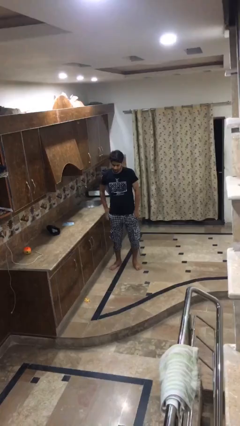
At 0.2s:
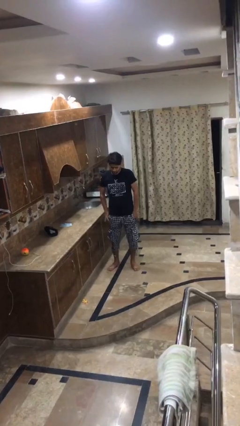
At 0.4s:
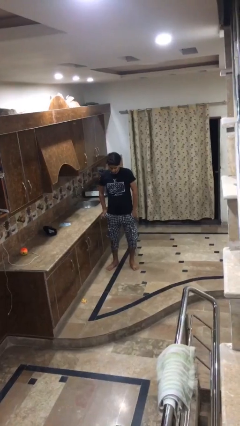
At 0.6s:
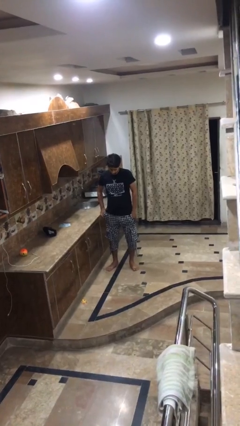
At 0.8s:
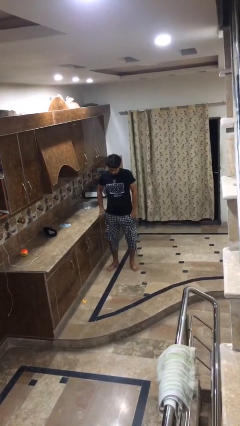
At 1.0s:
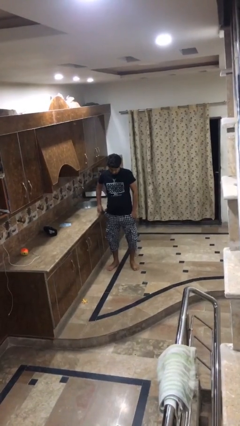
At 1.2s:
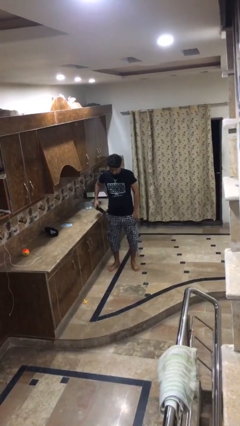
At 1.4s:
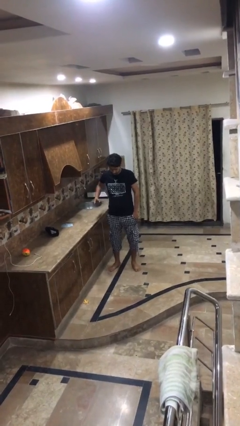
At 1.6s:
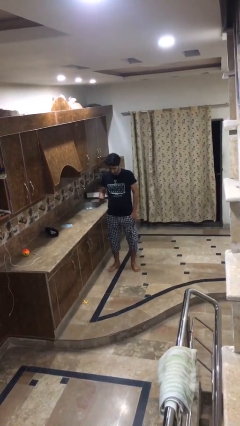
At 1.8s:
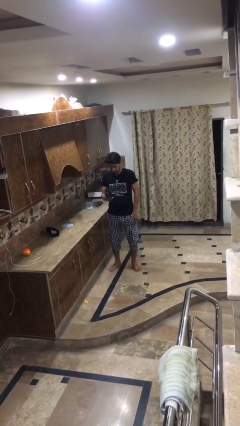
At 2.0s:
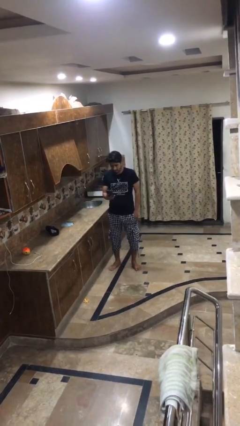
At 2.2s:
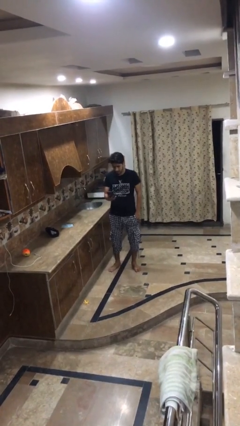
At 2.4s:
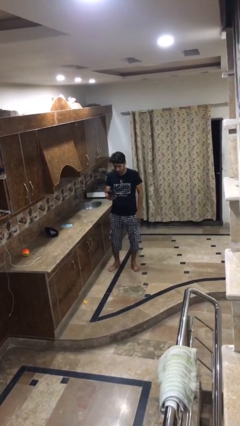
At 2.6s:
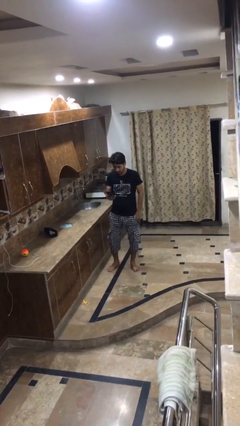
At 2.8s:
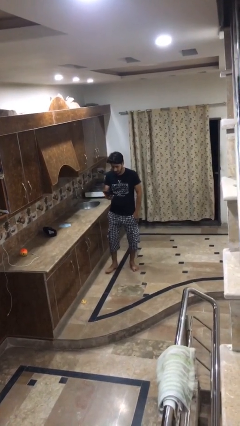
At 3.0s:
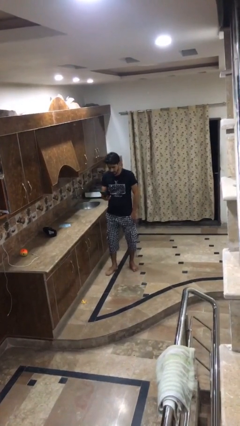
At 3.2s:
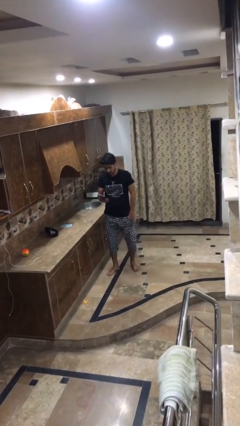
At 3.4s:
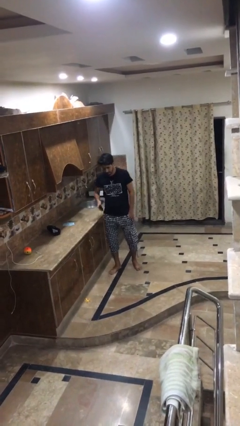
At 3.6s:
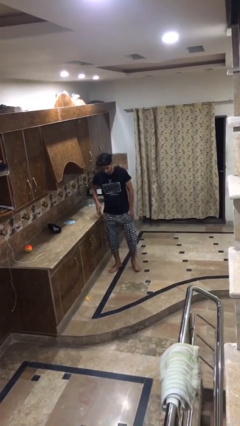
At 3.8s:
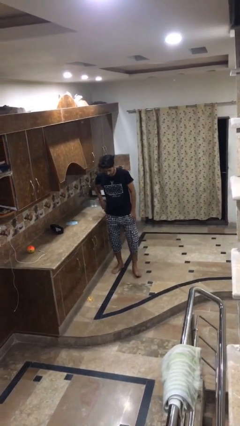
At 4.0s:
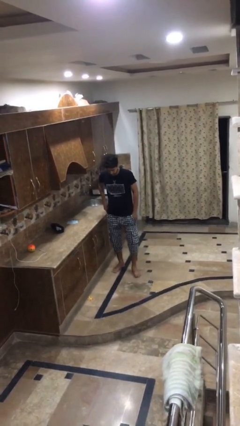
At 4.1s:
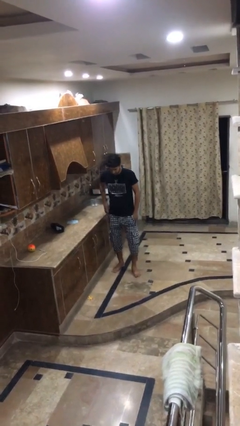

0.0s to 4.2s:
person takes phone from pocket

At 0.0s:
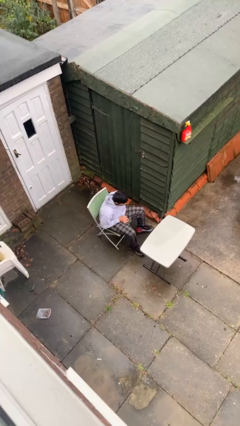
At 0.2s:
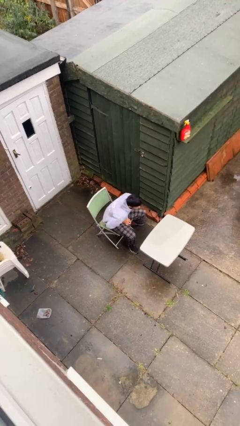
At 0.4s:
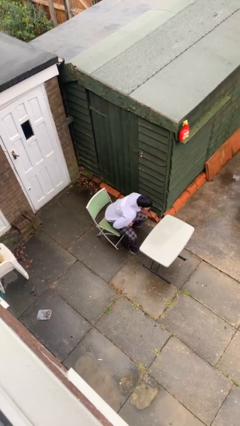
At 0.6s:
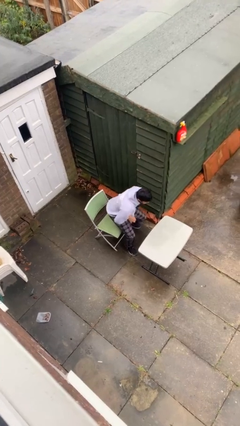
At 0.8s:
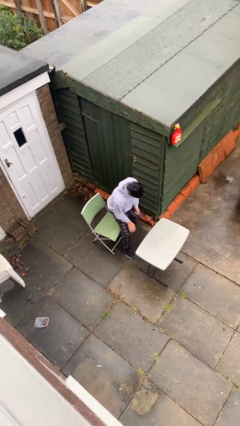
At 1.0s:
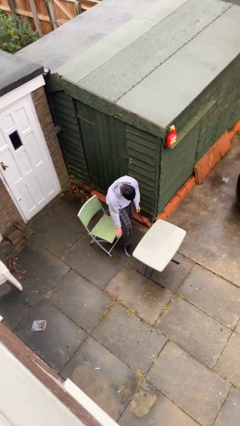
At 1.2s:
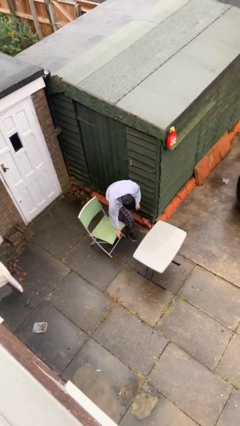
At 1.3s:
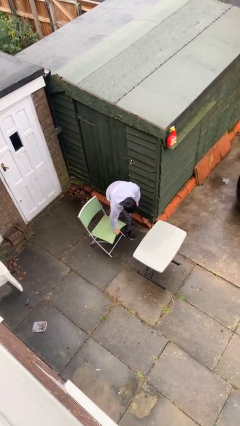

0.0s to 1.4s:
person stands up

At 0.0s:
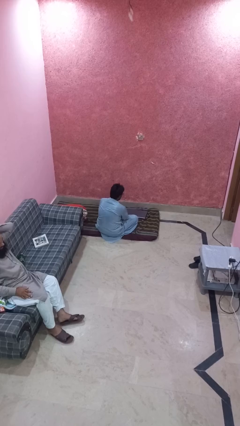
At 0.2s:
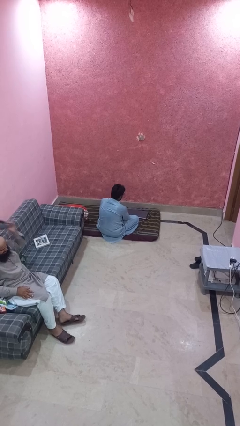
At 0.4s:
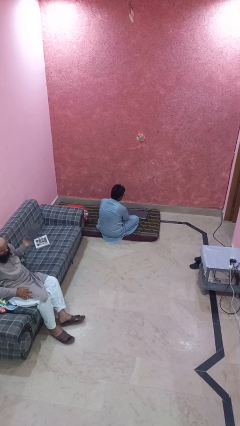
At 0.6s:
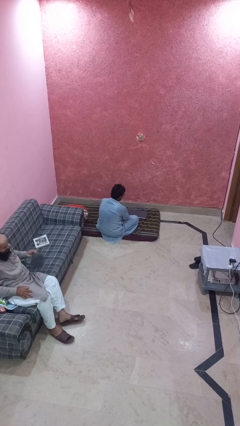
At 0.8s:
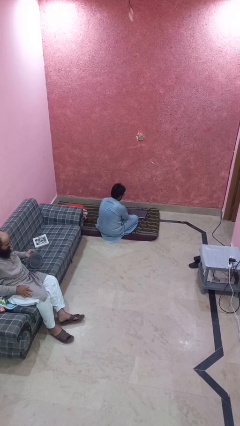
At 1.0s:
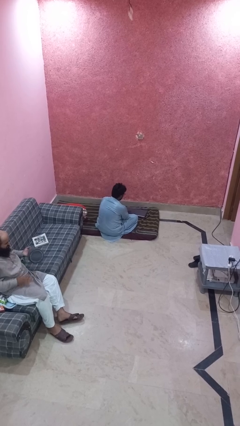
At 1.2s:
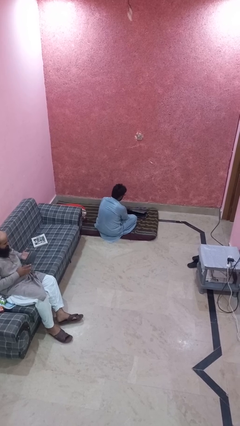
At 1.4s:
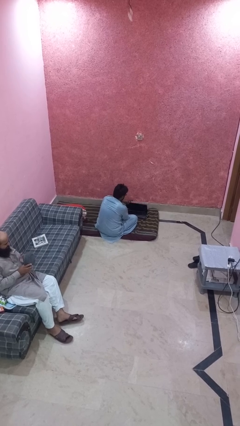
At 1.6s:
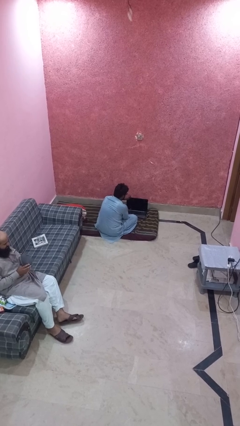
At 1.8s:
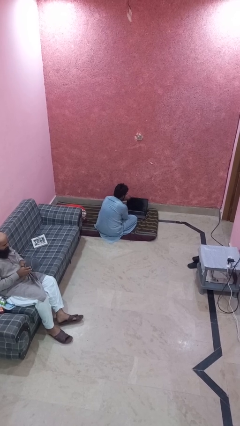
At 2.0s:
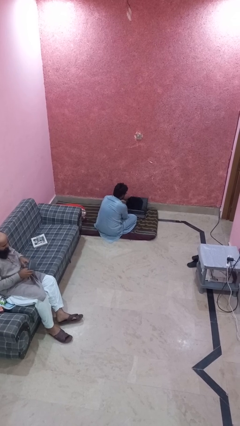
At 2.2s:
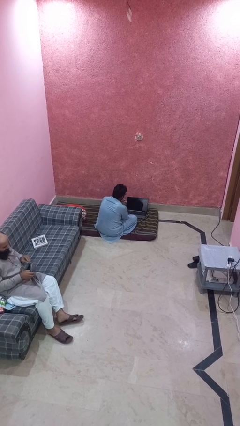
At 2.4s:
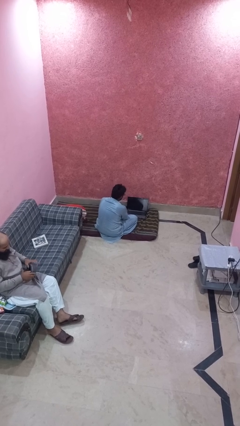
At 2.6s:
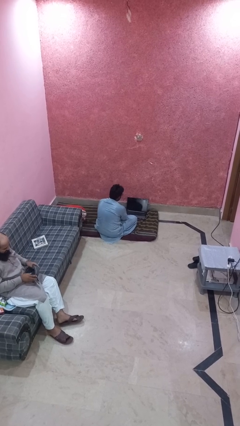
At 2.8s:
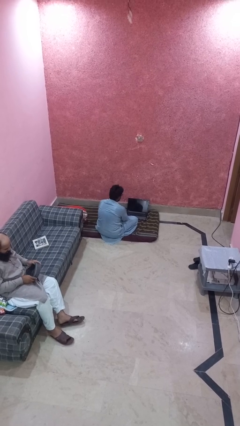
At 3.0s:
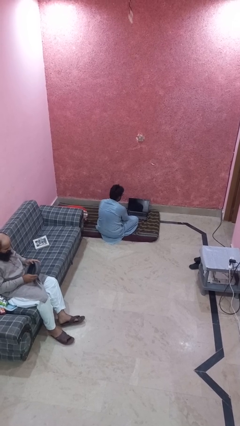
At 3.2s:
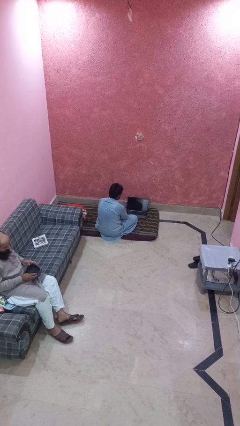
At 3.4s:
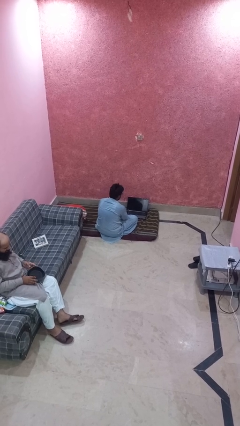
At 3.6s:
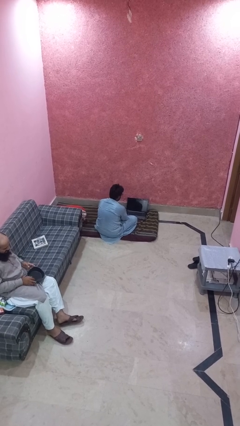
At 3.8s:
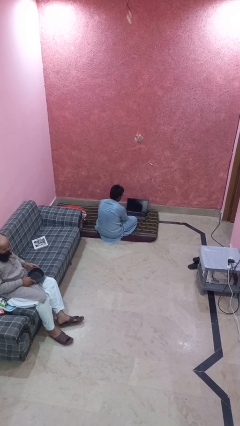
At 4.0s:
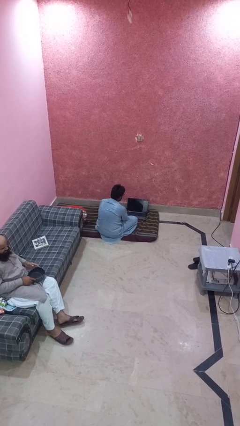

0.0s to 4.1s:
person opens laptop

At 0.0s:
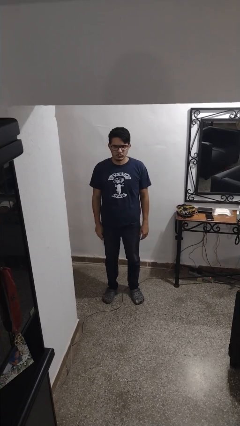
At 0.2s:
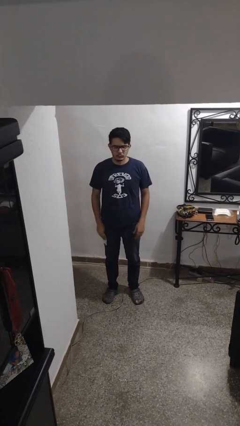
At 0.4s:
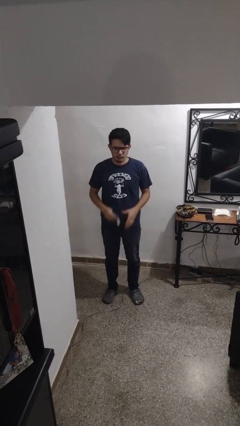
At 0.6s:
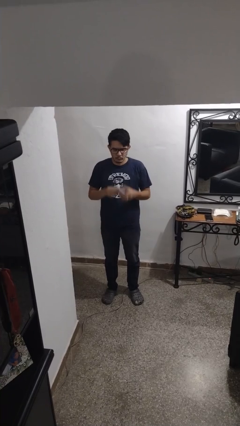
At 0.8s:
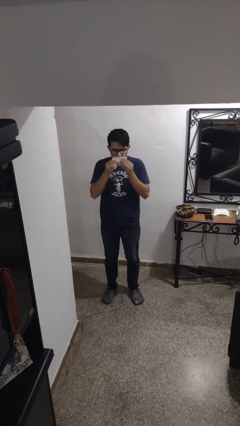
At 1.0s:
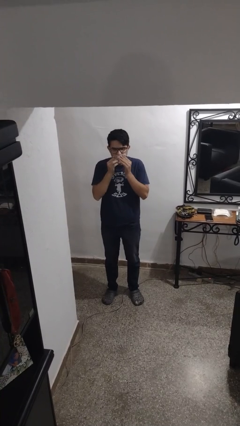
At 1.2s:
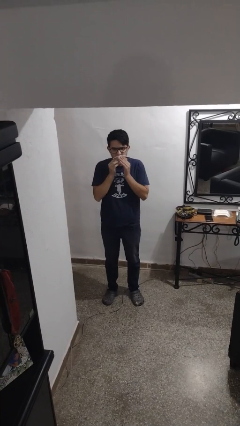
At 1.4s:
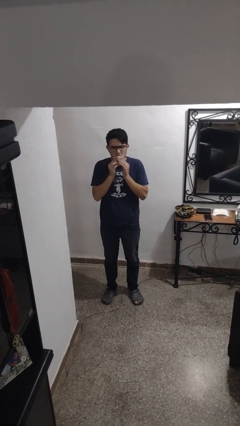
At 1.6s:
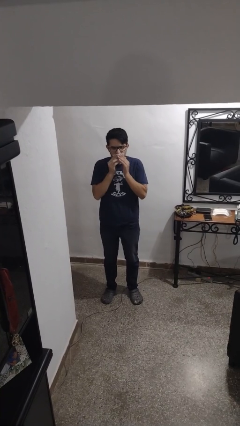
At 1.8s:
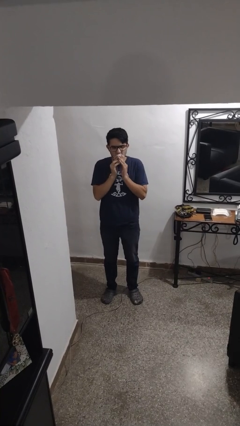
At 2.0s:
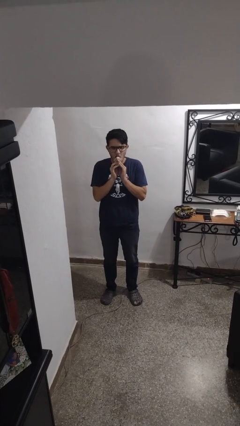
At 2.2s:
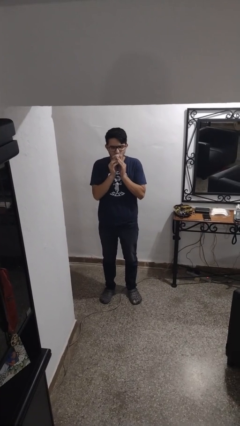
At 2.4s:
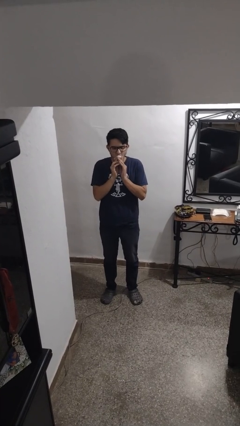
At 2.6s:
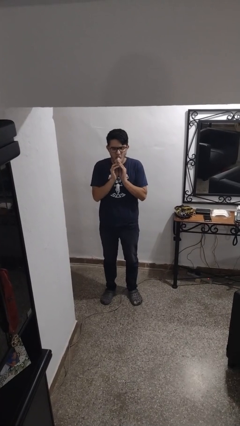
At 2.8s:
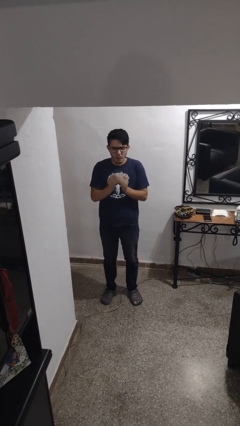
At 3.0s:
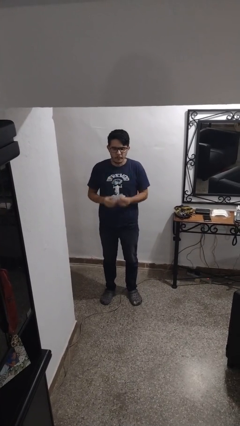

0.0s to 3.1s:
person wipes mouth with napkin

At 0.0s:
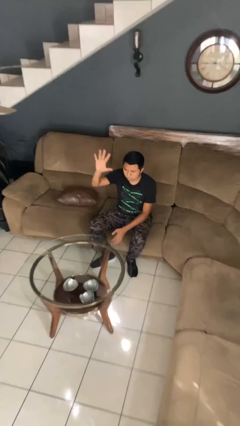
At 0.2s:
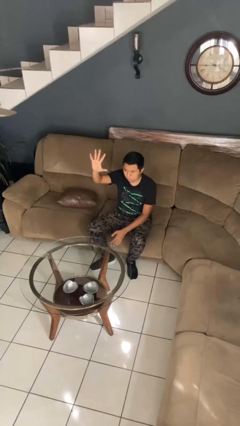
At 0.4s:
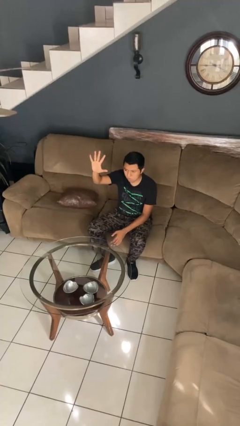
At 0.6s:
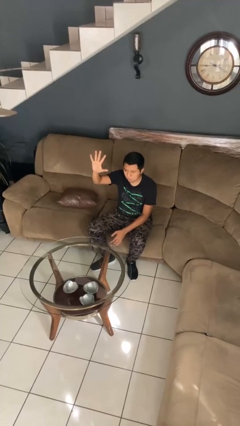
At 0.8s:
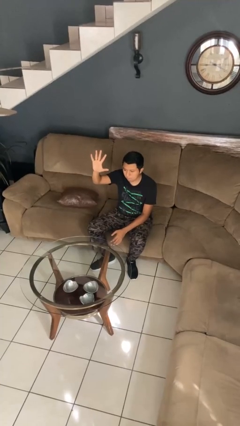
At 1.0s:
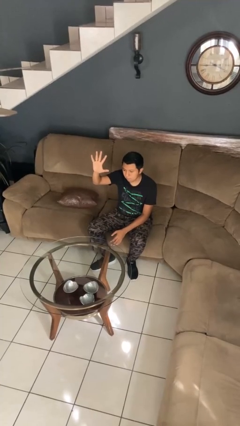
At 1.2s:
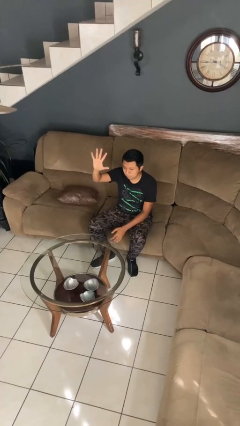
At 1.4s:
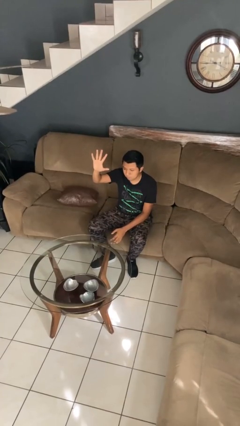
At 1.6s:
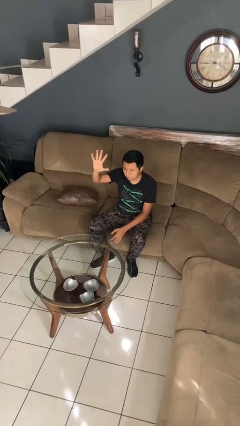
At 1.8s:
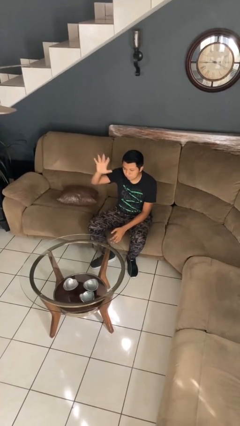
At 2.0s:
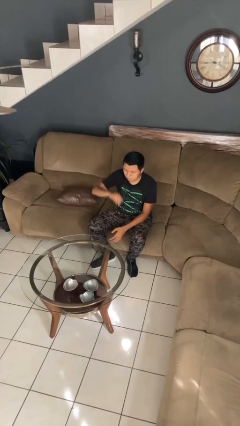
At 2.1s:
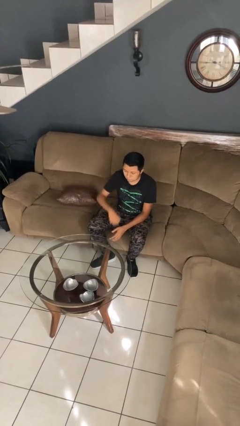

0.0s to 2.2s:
person gestures number five

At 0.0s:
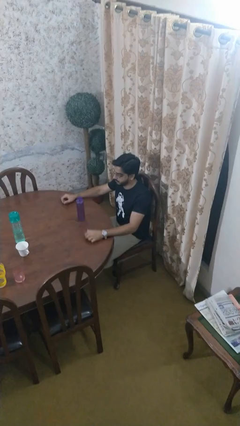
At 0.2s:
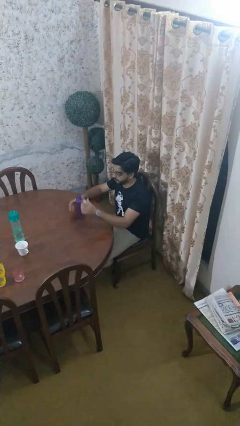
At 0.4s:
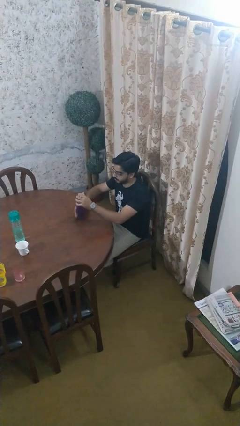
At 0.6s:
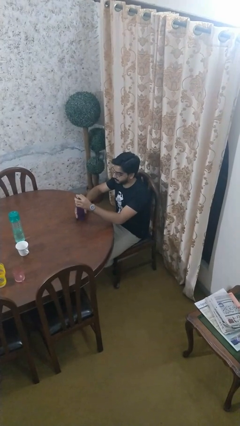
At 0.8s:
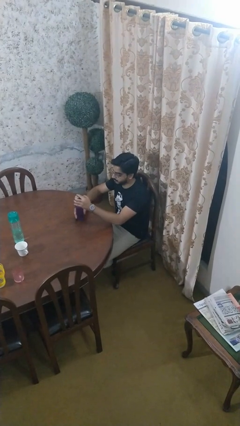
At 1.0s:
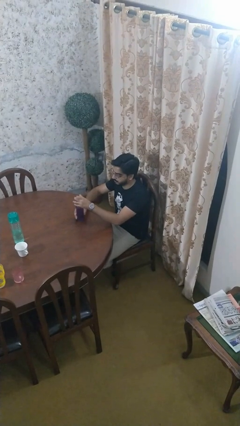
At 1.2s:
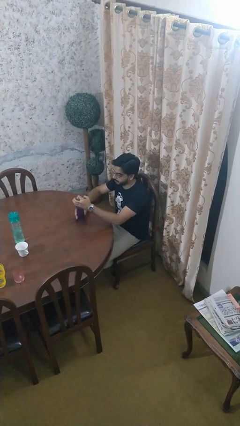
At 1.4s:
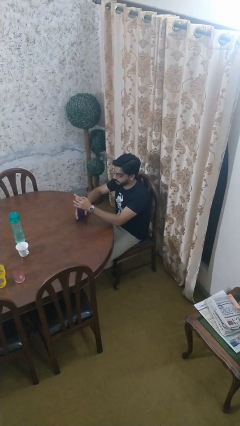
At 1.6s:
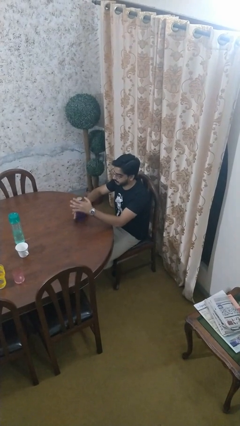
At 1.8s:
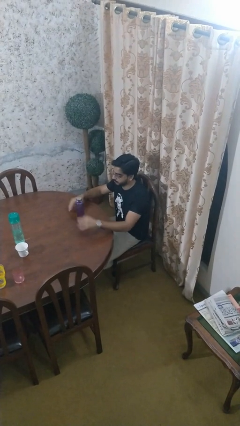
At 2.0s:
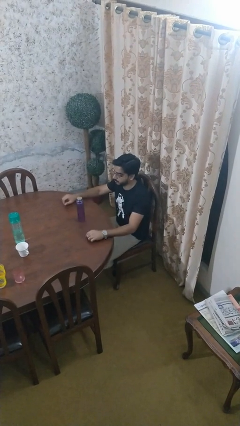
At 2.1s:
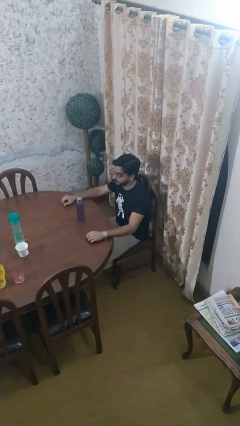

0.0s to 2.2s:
person screws lid to bottle
